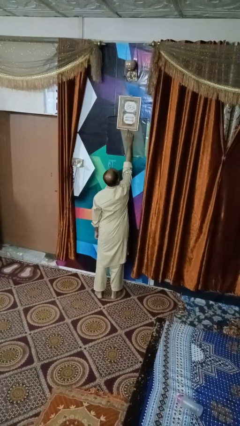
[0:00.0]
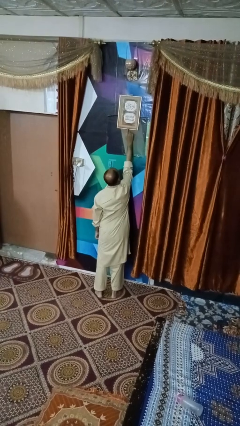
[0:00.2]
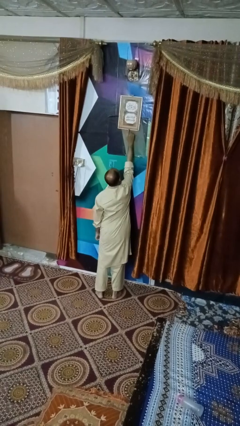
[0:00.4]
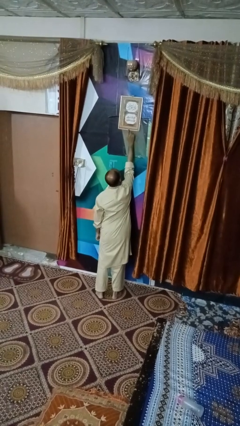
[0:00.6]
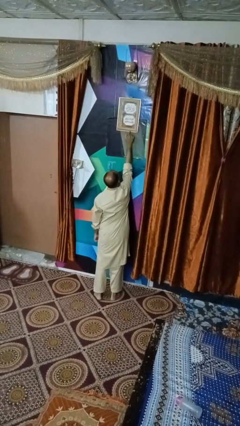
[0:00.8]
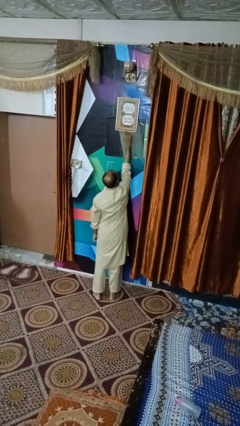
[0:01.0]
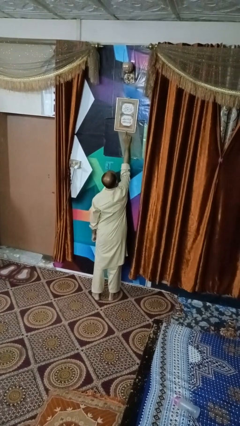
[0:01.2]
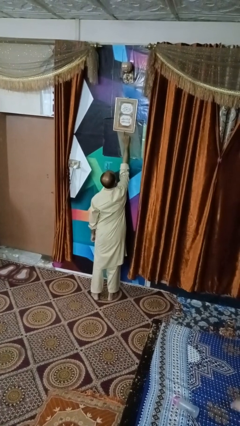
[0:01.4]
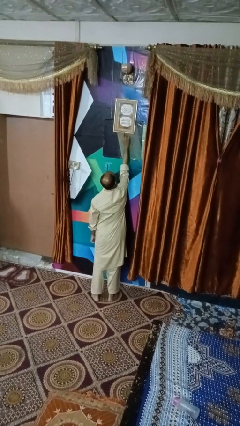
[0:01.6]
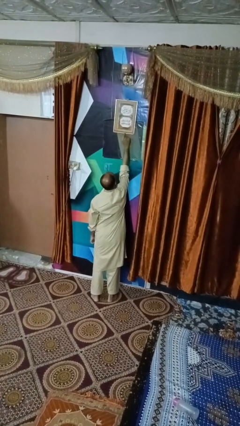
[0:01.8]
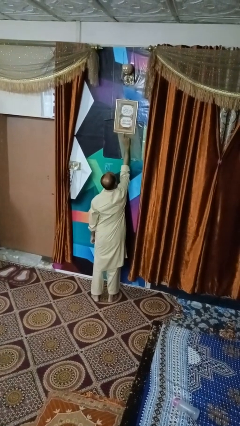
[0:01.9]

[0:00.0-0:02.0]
person taps object with finger

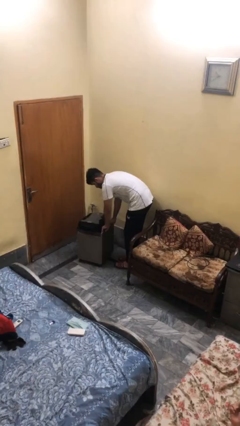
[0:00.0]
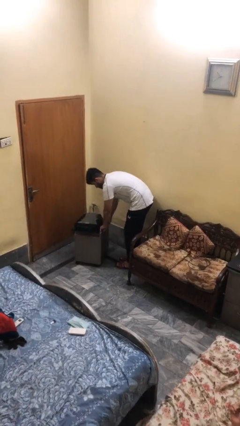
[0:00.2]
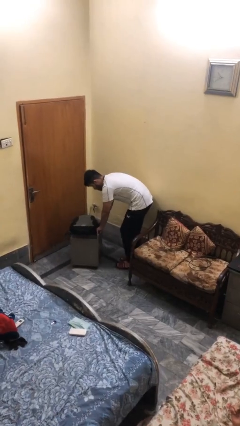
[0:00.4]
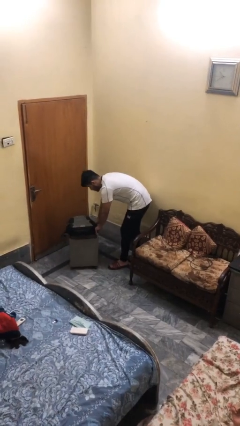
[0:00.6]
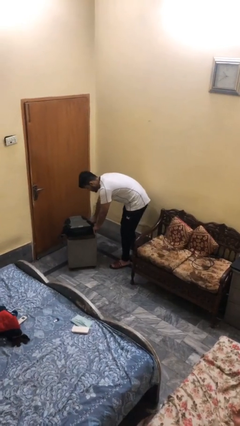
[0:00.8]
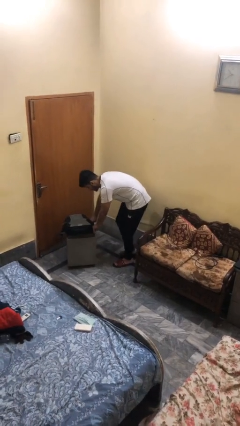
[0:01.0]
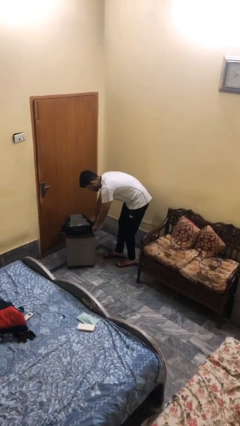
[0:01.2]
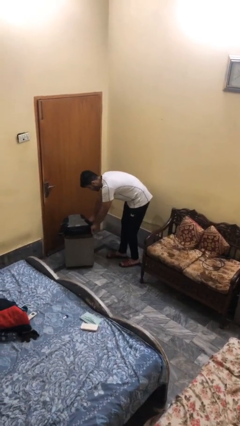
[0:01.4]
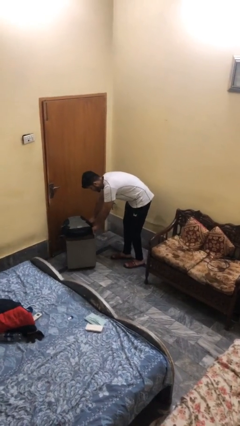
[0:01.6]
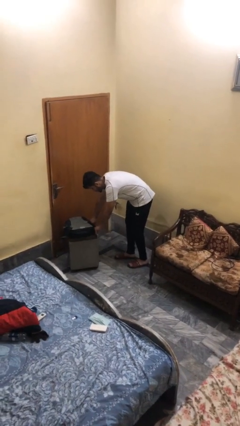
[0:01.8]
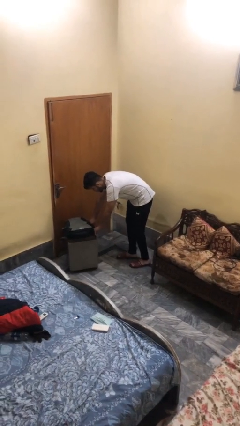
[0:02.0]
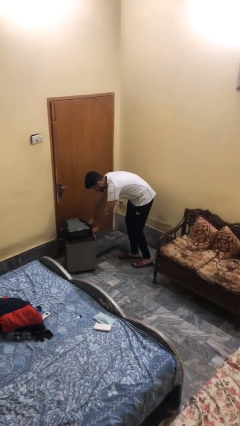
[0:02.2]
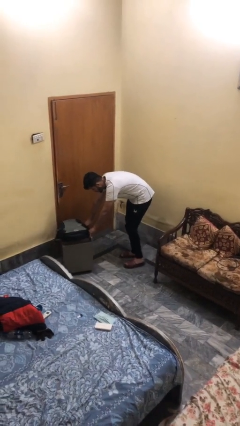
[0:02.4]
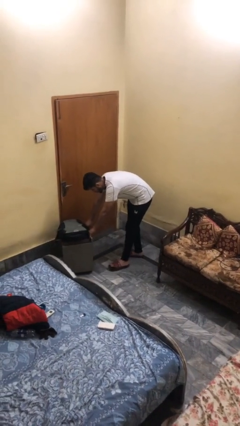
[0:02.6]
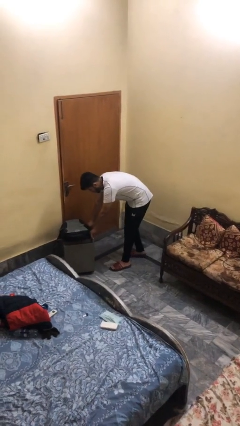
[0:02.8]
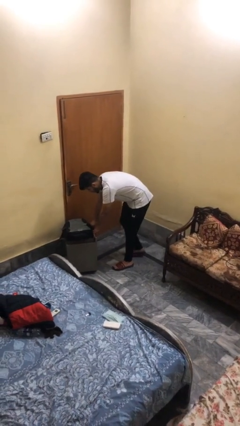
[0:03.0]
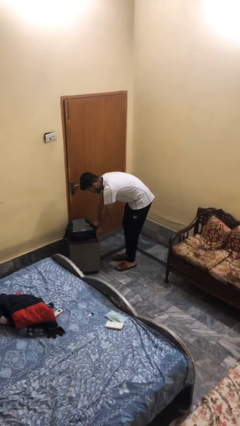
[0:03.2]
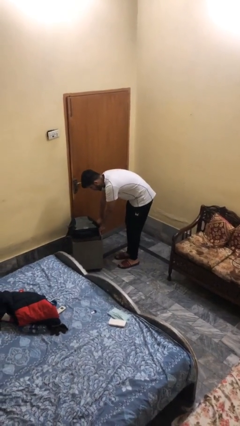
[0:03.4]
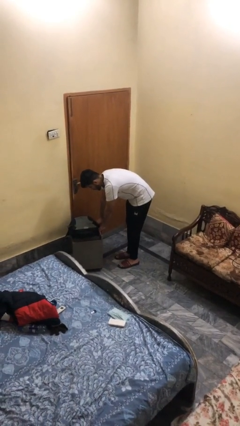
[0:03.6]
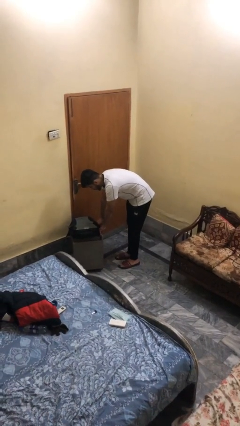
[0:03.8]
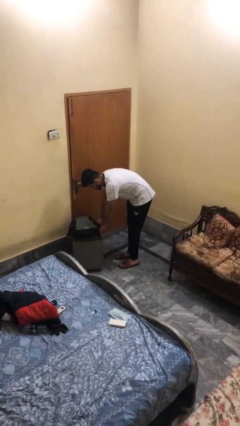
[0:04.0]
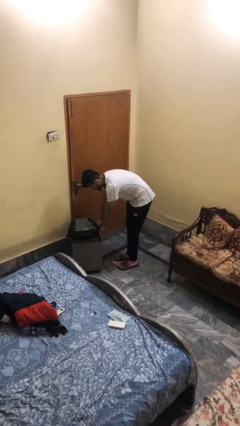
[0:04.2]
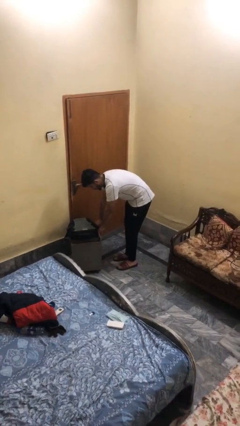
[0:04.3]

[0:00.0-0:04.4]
person pushes wheeled cart

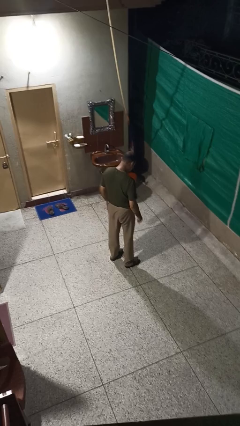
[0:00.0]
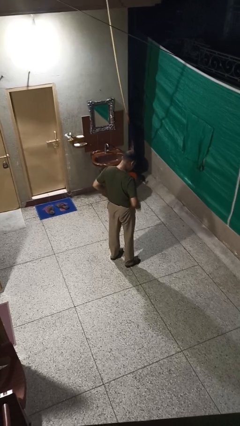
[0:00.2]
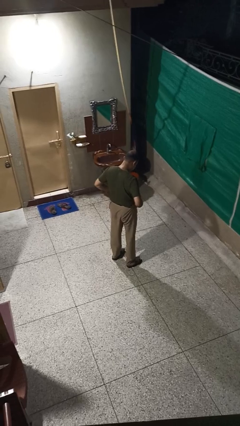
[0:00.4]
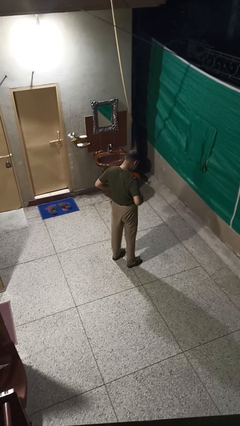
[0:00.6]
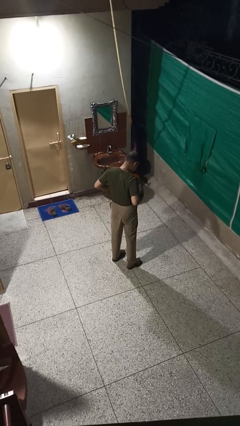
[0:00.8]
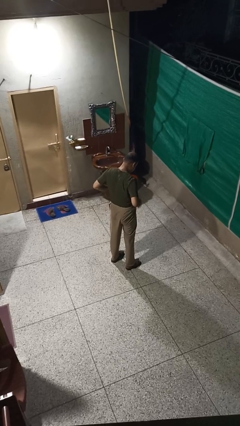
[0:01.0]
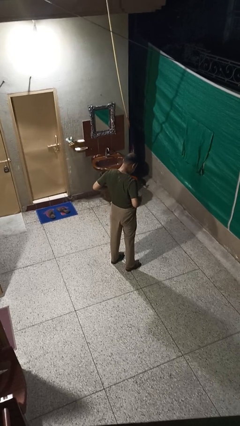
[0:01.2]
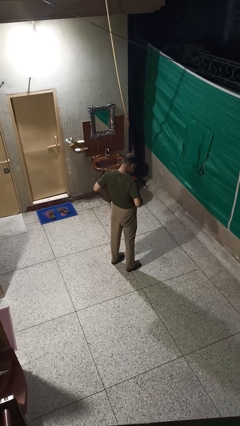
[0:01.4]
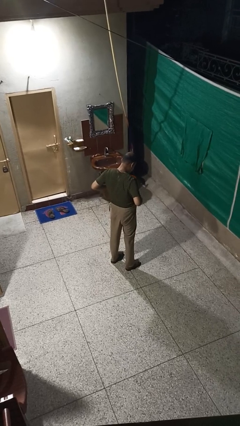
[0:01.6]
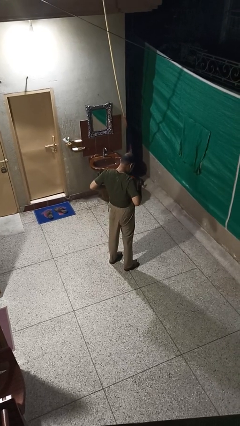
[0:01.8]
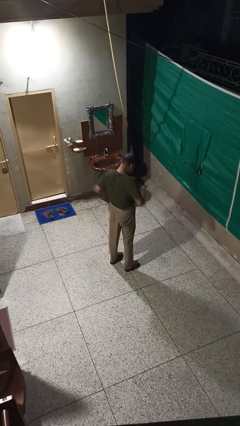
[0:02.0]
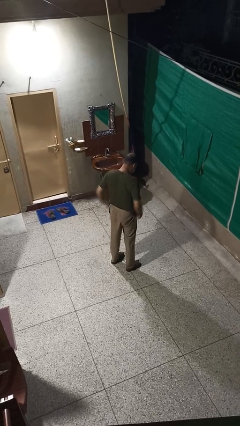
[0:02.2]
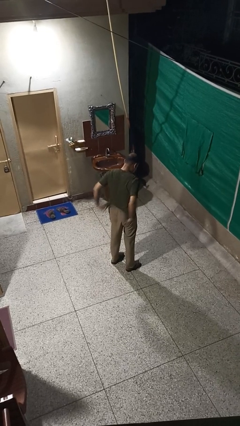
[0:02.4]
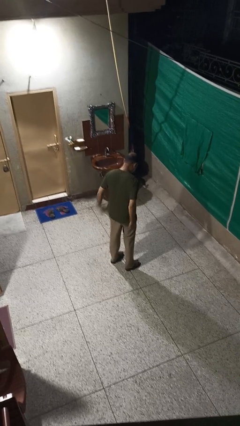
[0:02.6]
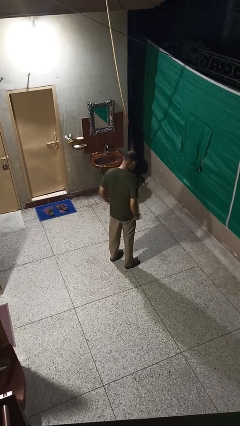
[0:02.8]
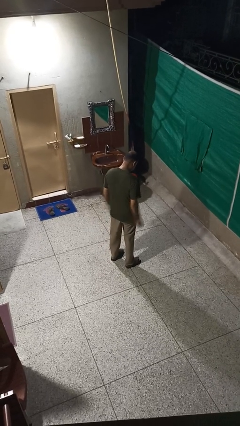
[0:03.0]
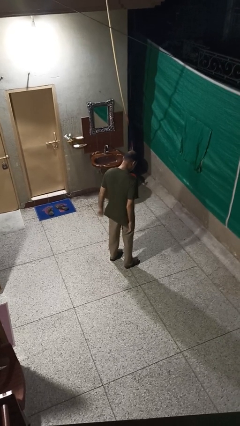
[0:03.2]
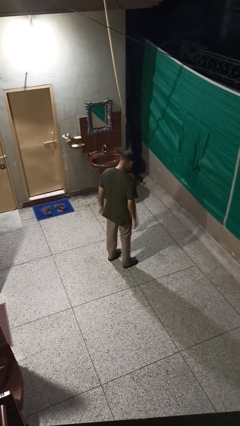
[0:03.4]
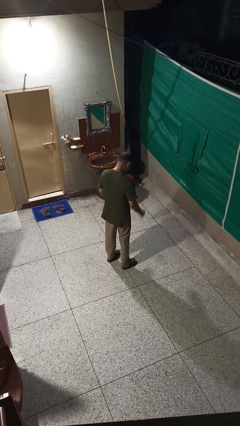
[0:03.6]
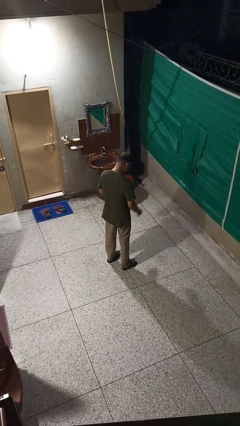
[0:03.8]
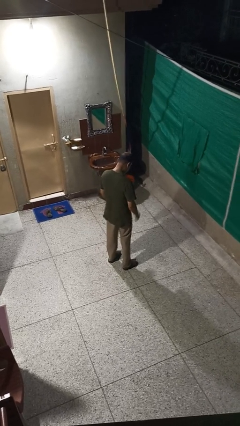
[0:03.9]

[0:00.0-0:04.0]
person untucks shirt

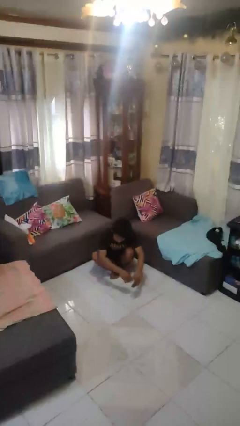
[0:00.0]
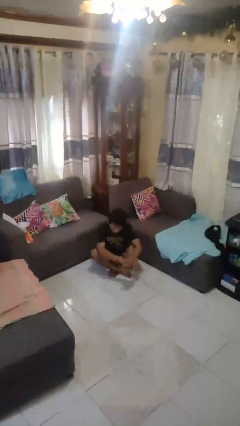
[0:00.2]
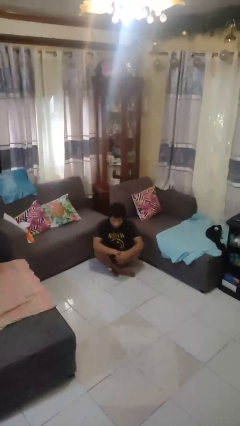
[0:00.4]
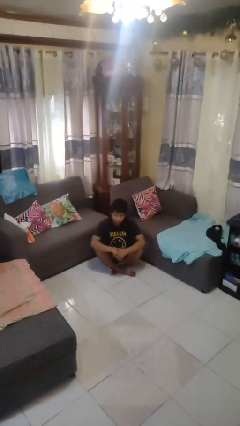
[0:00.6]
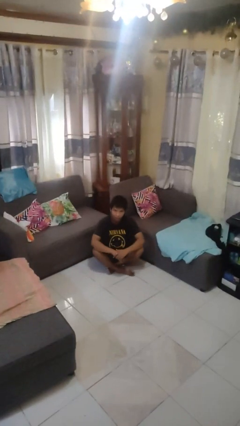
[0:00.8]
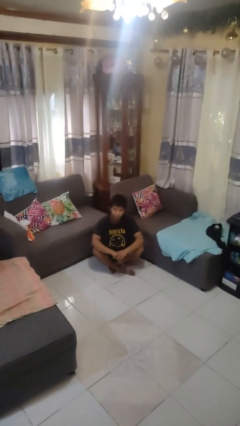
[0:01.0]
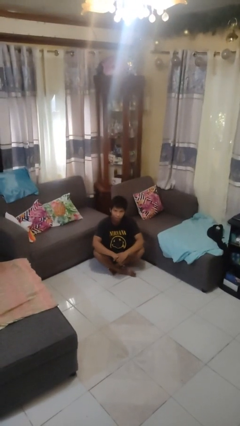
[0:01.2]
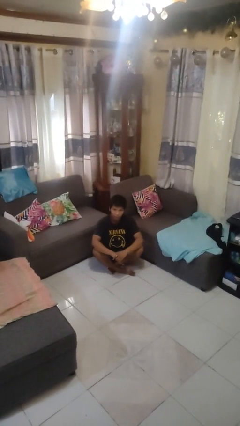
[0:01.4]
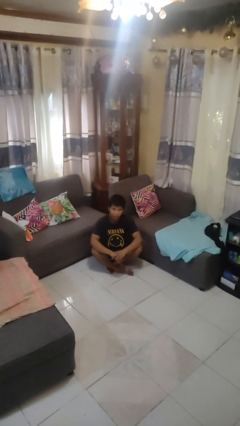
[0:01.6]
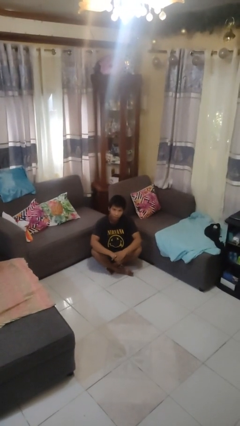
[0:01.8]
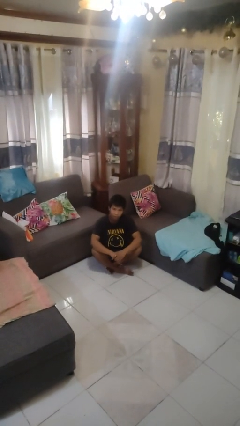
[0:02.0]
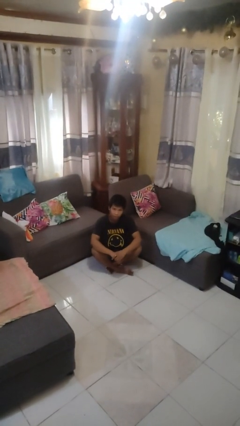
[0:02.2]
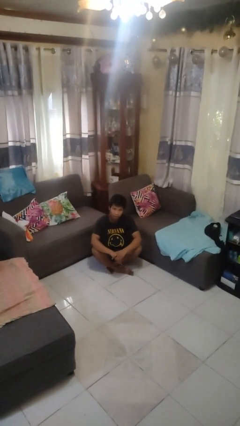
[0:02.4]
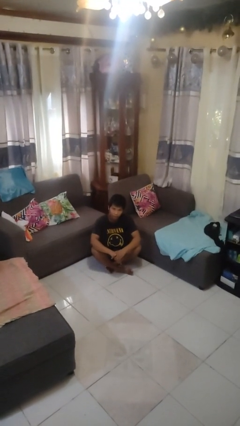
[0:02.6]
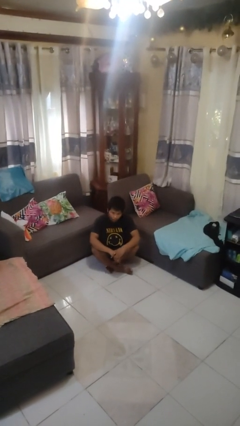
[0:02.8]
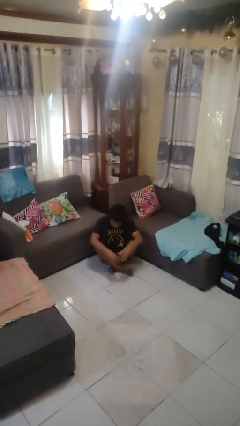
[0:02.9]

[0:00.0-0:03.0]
person sits crisscross

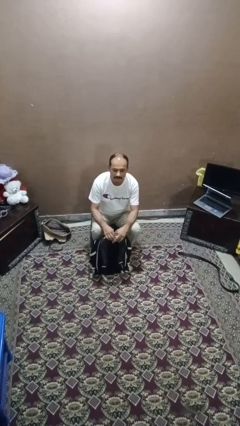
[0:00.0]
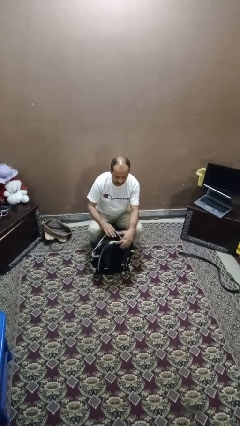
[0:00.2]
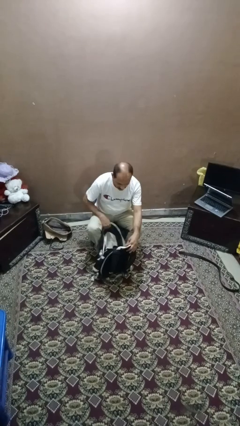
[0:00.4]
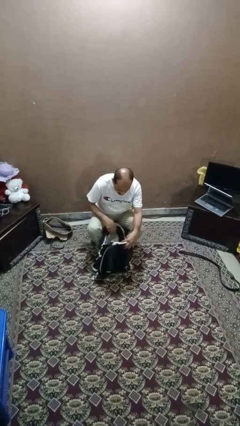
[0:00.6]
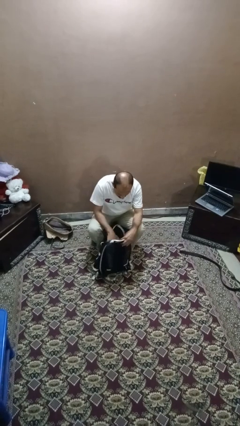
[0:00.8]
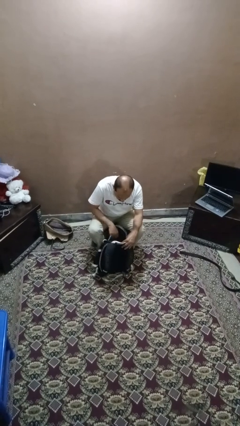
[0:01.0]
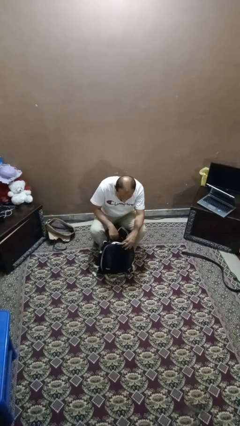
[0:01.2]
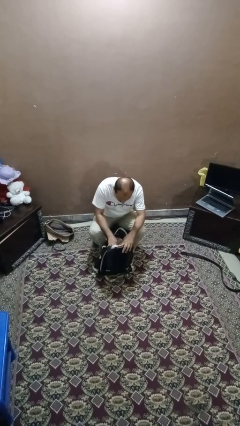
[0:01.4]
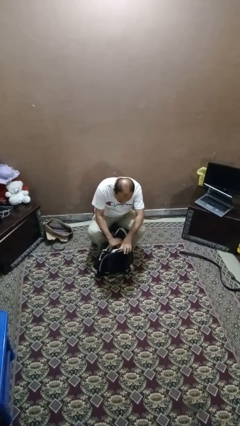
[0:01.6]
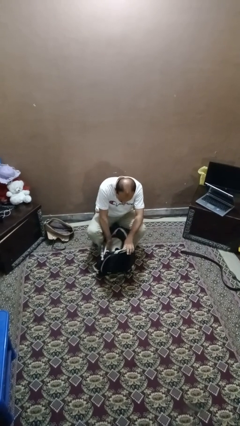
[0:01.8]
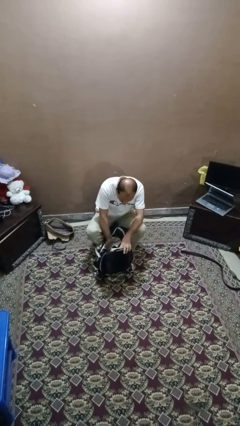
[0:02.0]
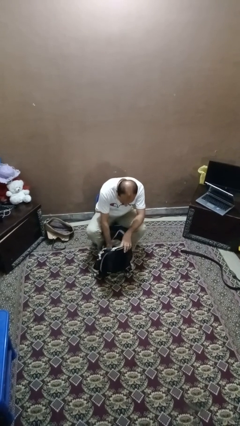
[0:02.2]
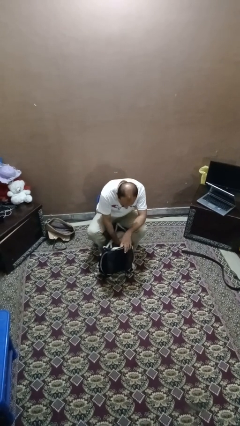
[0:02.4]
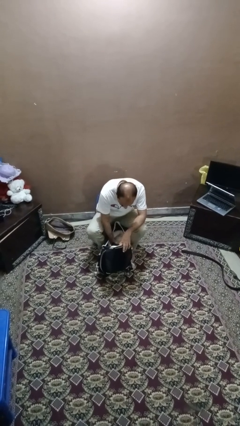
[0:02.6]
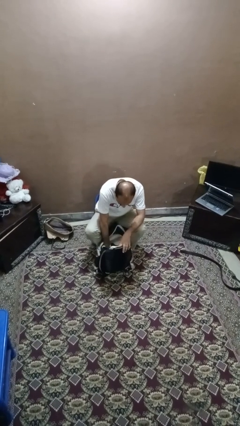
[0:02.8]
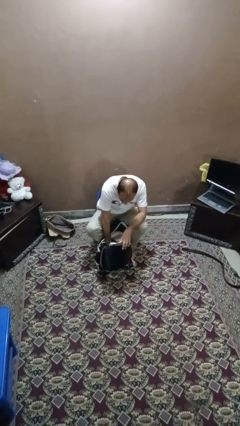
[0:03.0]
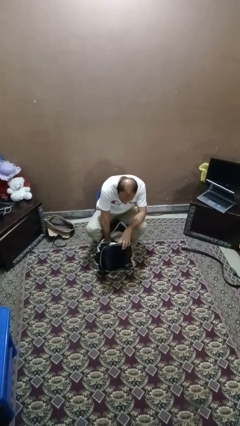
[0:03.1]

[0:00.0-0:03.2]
person searches in backpack

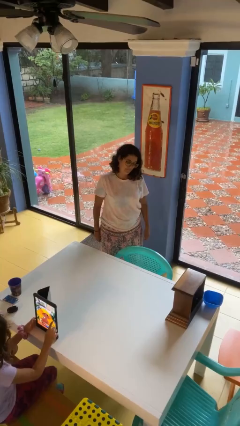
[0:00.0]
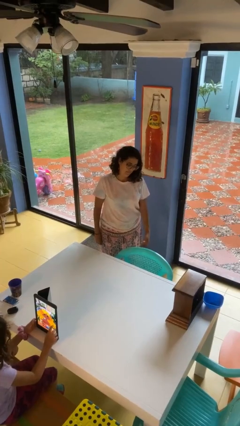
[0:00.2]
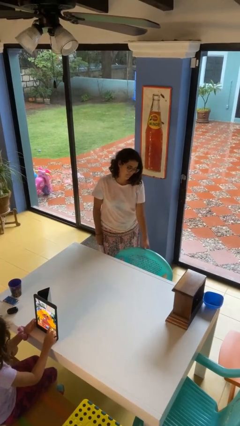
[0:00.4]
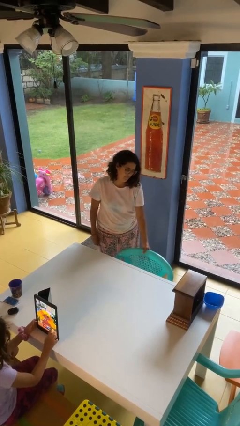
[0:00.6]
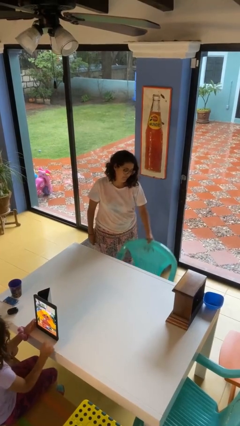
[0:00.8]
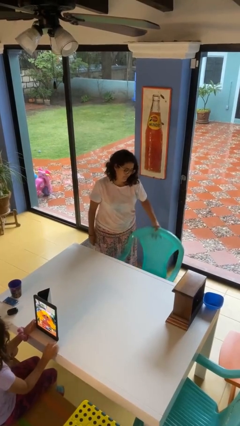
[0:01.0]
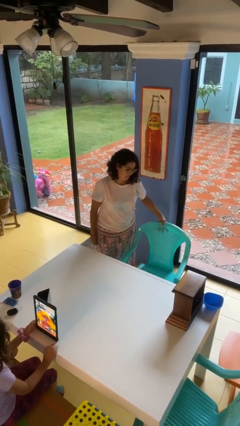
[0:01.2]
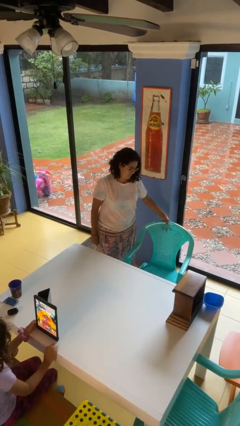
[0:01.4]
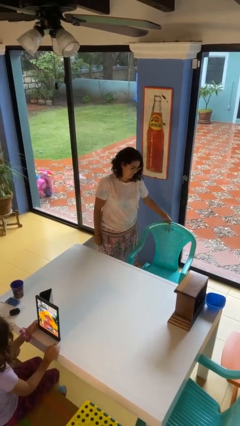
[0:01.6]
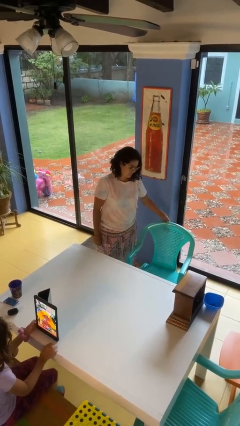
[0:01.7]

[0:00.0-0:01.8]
person pulls out chair
